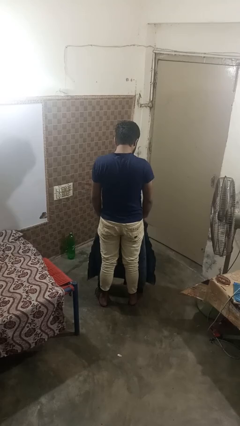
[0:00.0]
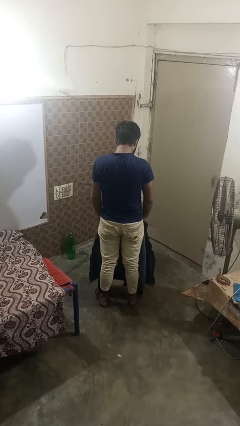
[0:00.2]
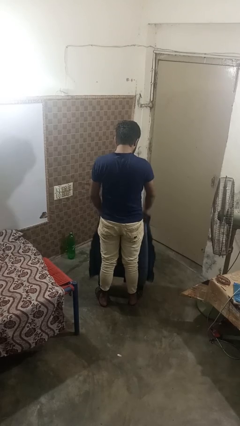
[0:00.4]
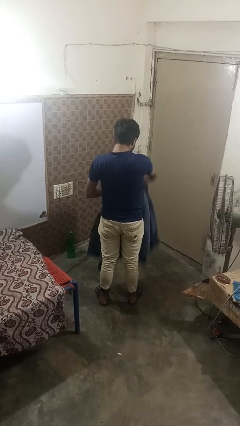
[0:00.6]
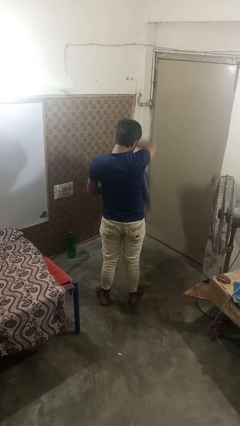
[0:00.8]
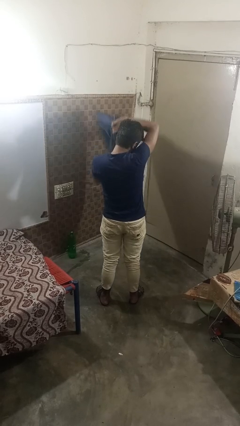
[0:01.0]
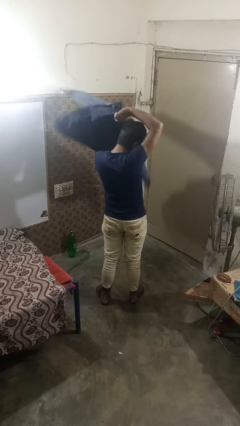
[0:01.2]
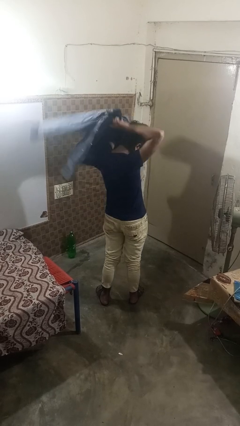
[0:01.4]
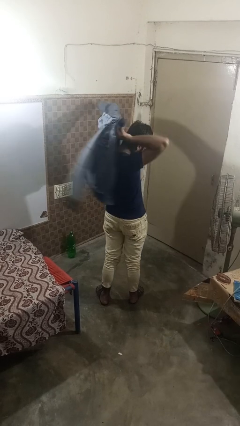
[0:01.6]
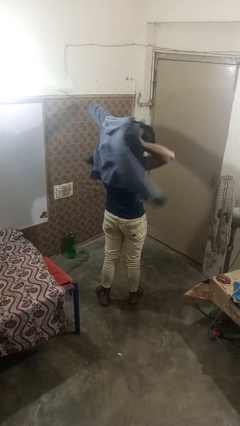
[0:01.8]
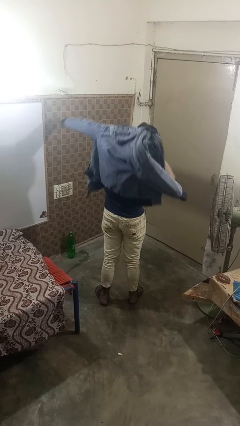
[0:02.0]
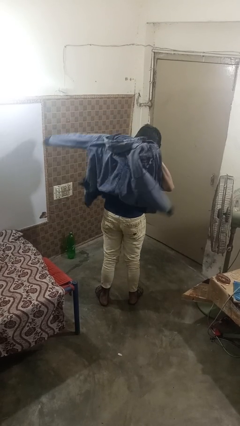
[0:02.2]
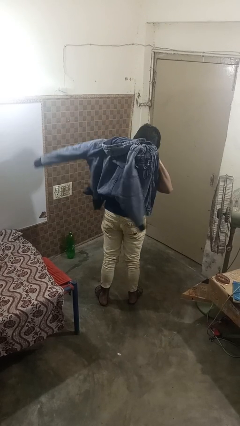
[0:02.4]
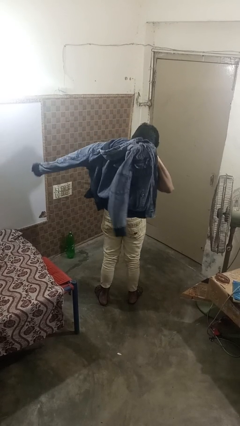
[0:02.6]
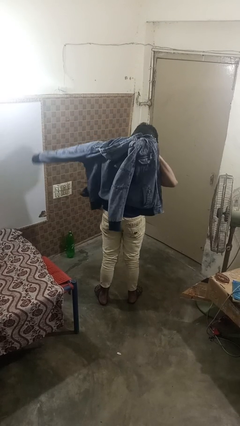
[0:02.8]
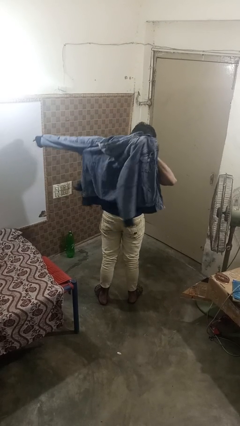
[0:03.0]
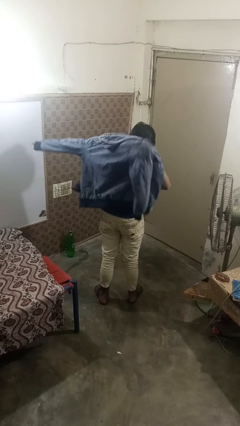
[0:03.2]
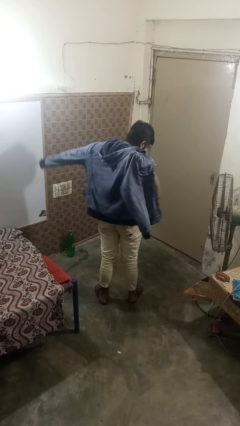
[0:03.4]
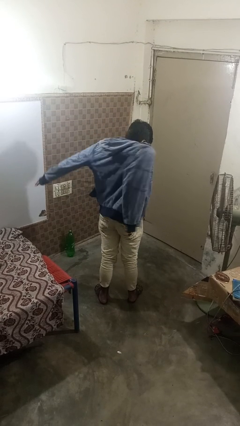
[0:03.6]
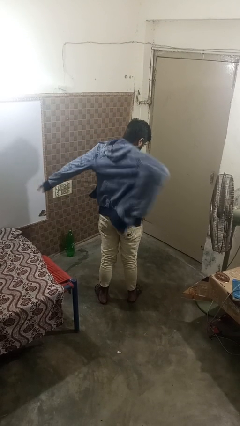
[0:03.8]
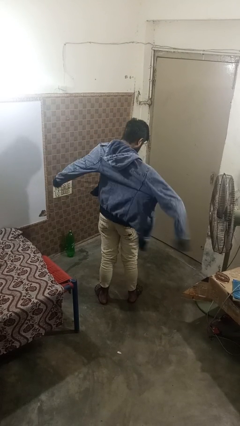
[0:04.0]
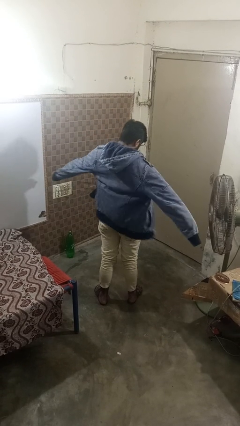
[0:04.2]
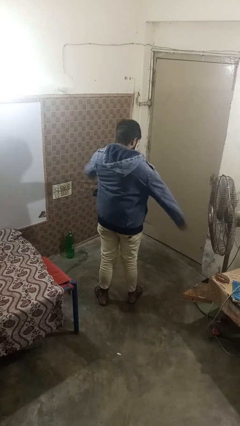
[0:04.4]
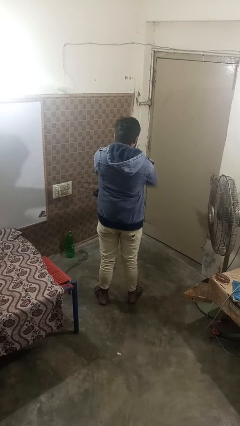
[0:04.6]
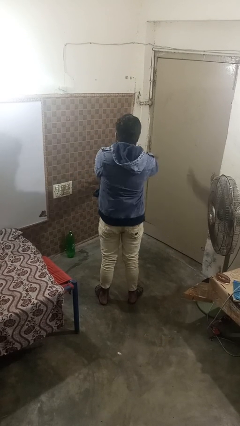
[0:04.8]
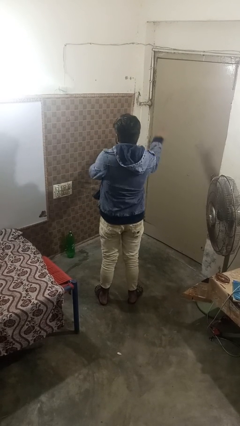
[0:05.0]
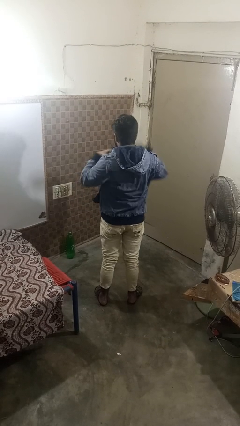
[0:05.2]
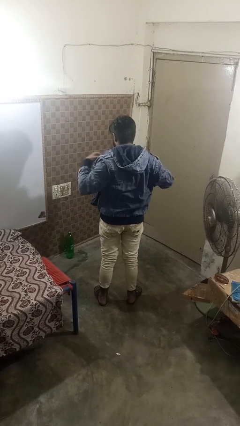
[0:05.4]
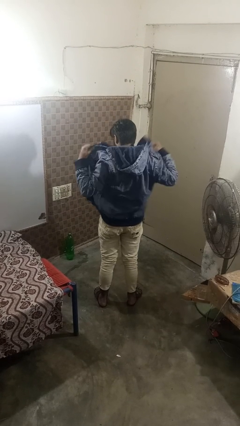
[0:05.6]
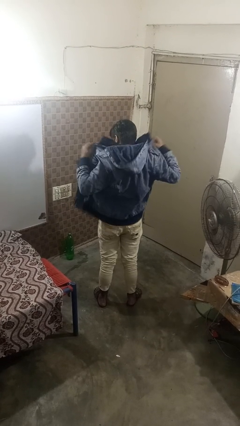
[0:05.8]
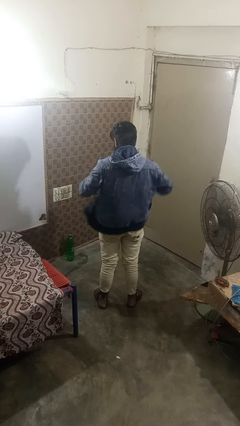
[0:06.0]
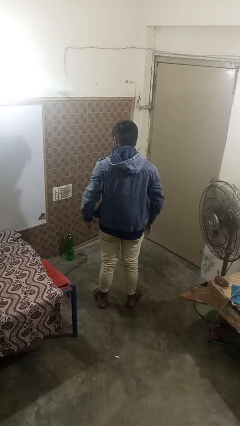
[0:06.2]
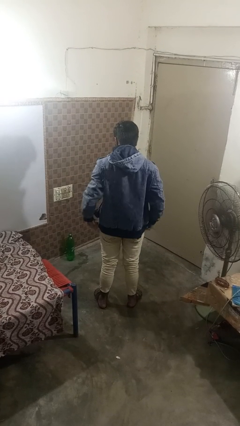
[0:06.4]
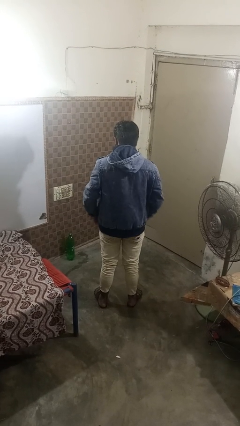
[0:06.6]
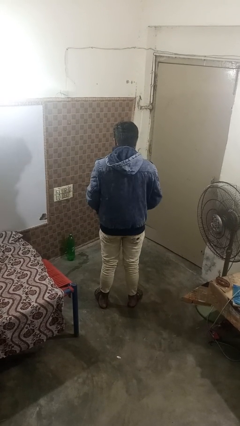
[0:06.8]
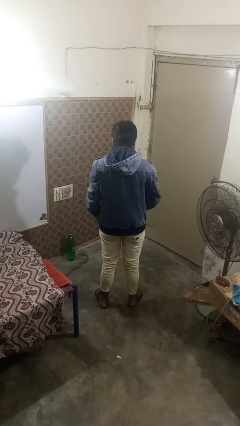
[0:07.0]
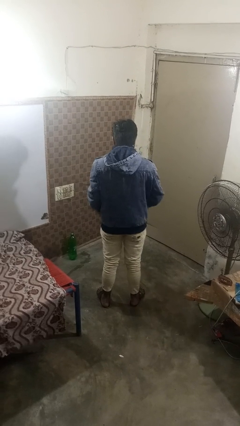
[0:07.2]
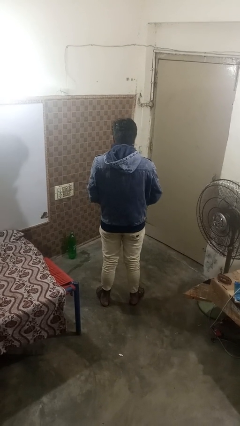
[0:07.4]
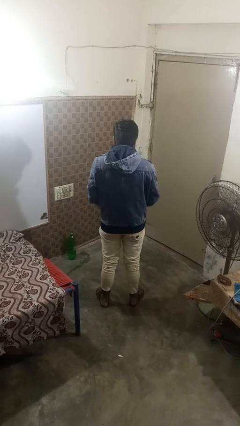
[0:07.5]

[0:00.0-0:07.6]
person puts on jacket

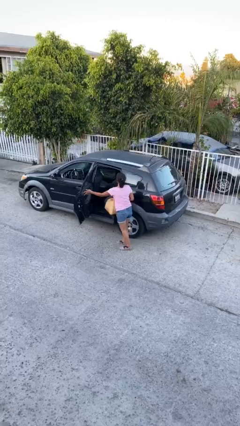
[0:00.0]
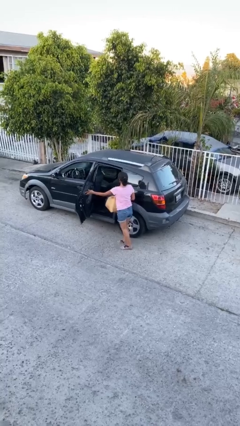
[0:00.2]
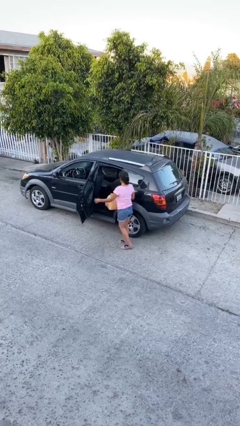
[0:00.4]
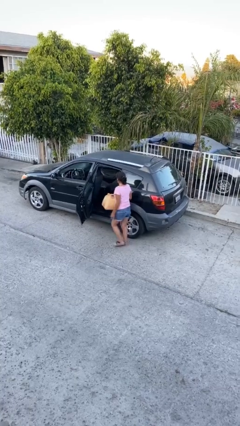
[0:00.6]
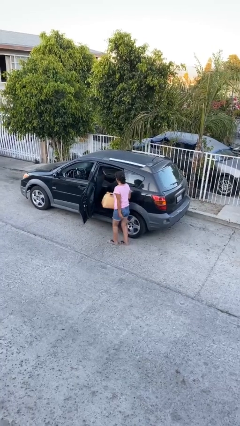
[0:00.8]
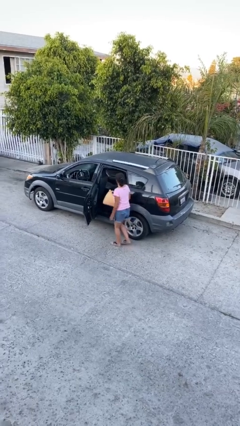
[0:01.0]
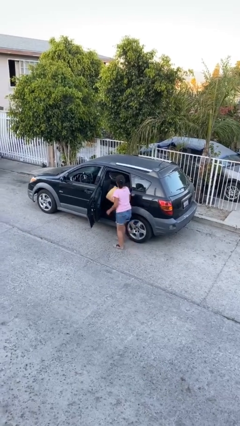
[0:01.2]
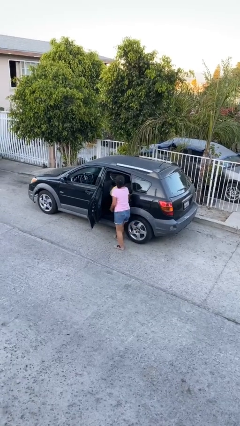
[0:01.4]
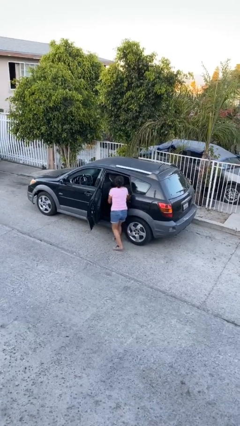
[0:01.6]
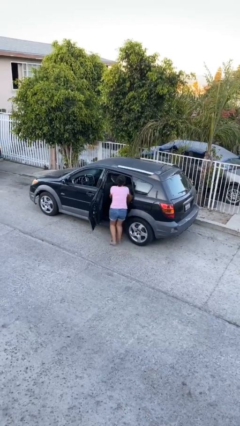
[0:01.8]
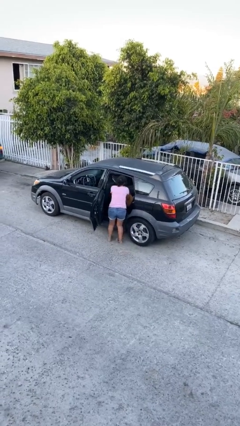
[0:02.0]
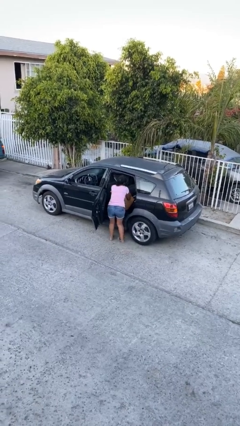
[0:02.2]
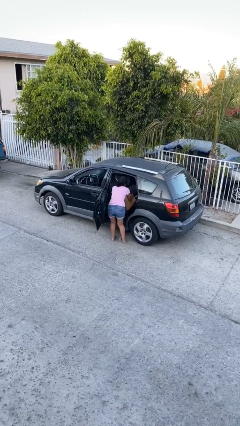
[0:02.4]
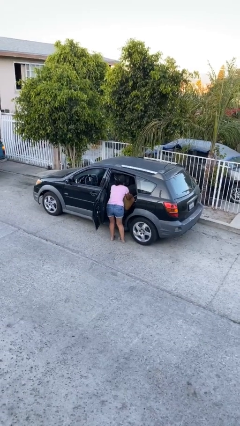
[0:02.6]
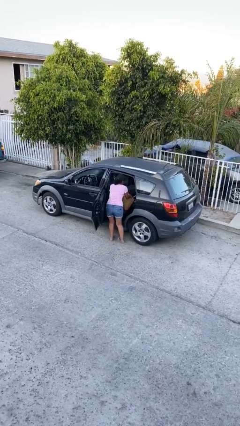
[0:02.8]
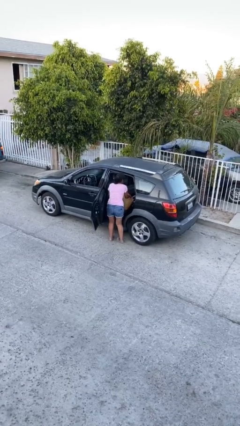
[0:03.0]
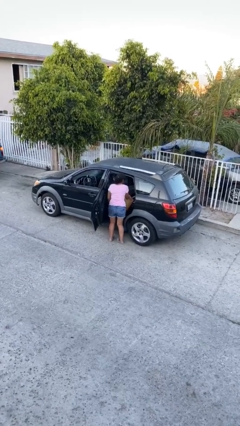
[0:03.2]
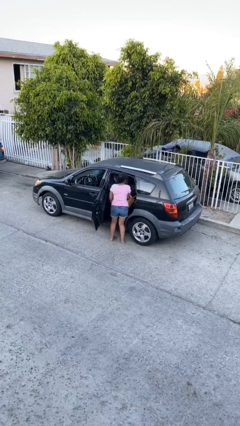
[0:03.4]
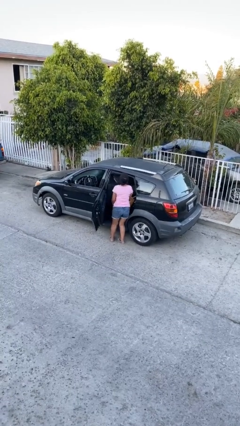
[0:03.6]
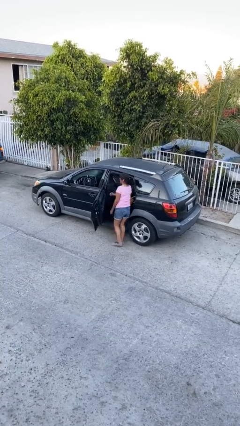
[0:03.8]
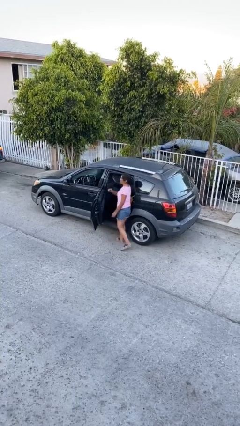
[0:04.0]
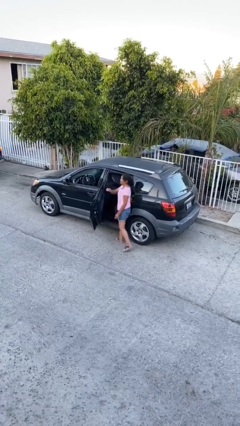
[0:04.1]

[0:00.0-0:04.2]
person loads car

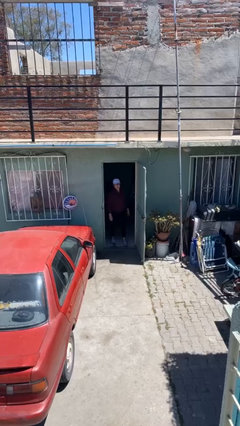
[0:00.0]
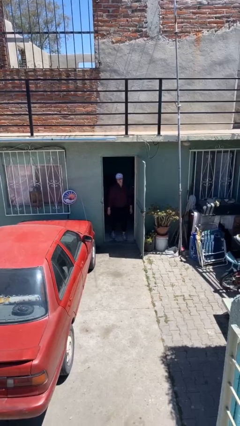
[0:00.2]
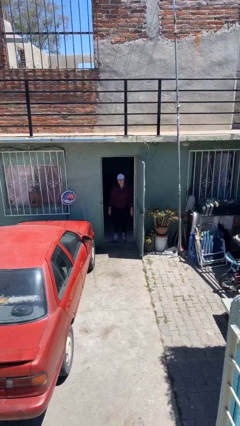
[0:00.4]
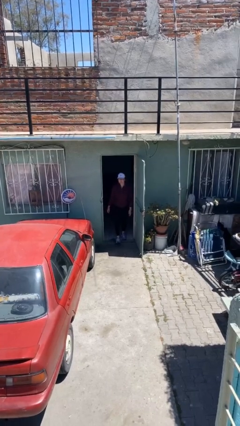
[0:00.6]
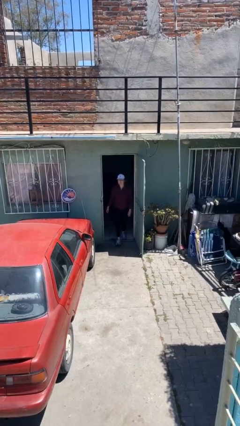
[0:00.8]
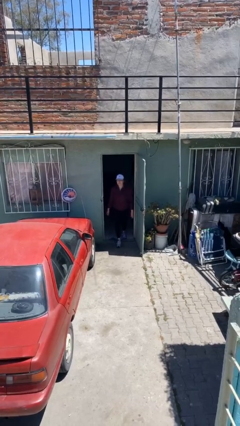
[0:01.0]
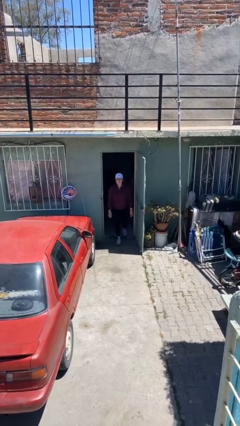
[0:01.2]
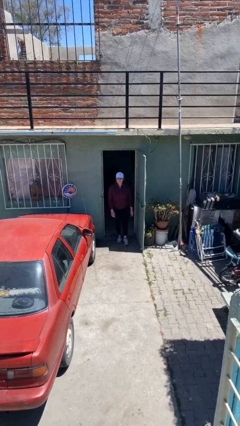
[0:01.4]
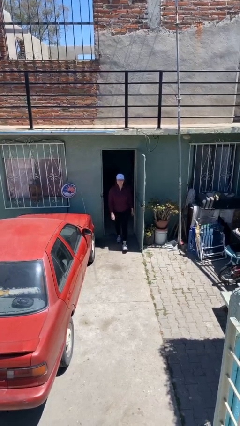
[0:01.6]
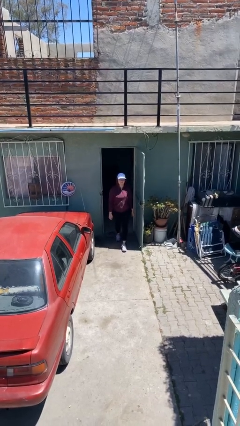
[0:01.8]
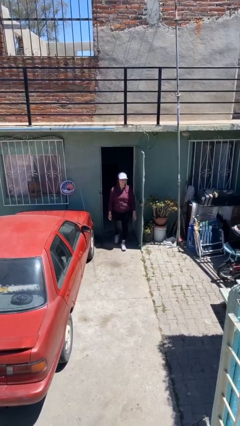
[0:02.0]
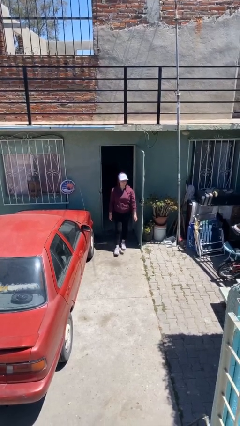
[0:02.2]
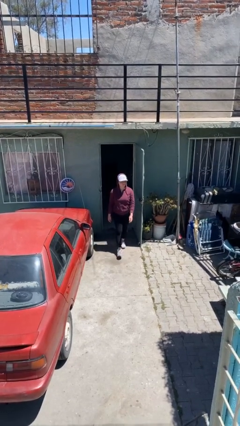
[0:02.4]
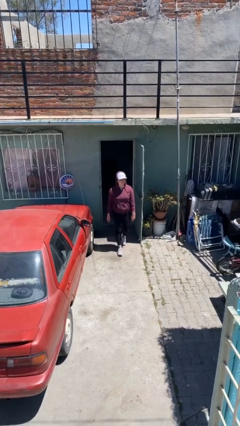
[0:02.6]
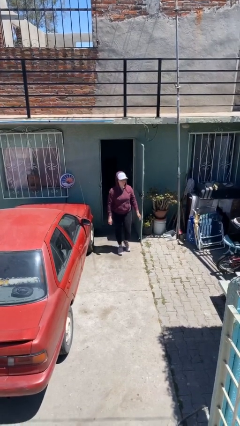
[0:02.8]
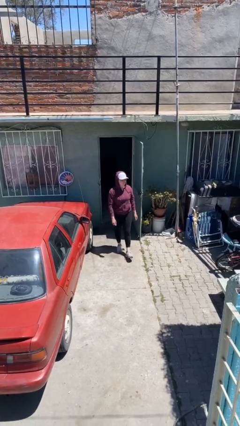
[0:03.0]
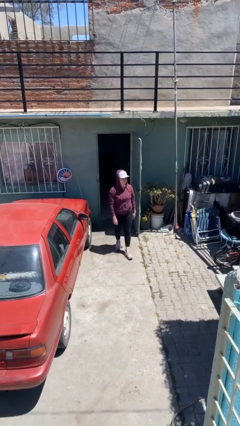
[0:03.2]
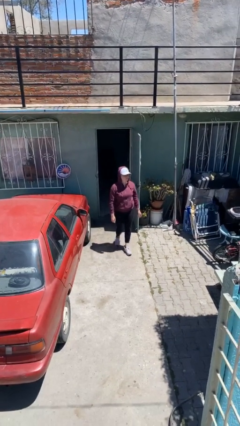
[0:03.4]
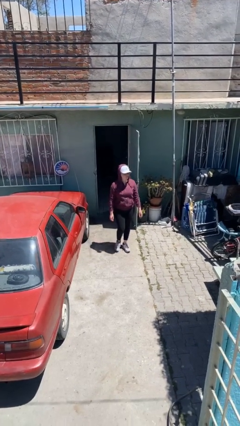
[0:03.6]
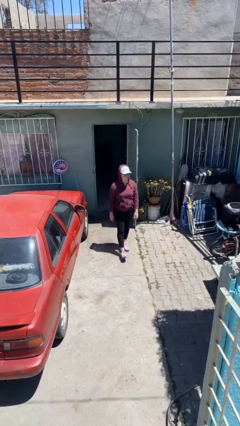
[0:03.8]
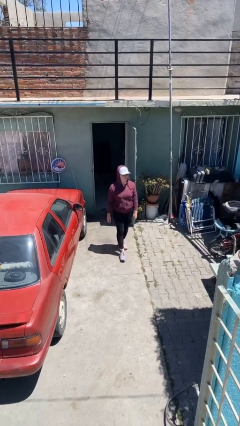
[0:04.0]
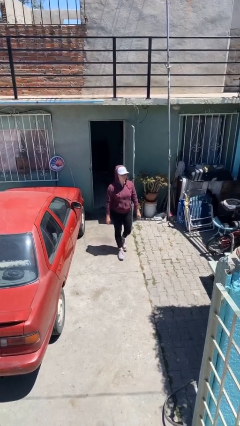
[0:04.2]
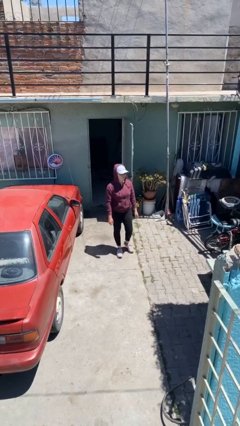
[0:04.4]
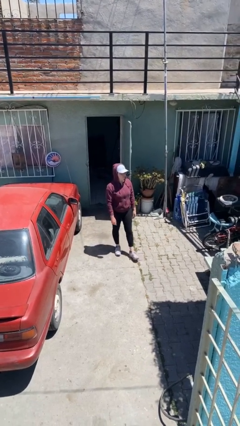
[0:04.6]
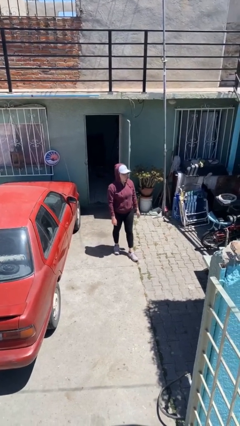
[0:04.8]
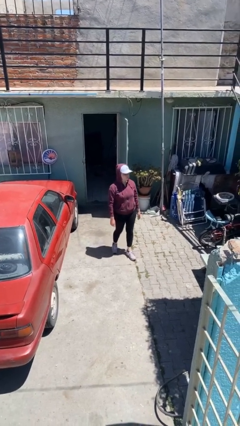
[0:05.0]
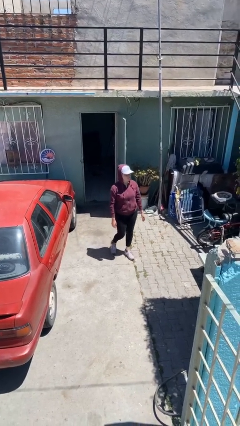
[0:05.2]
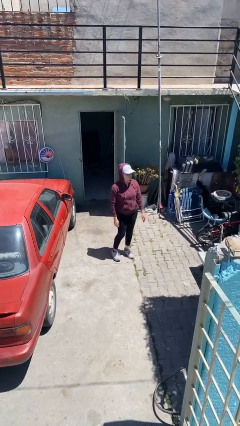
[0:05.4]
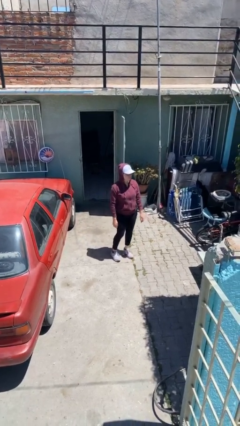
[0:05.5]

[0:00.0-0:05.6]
person enters scene through structure

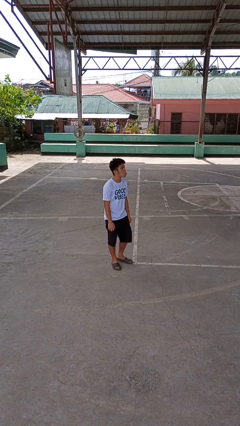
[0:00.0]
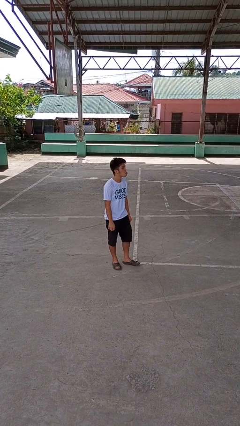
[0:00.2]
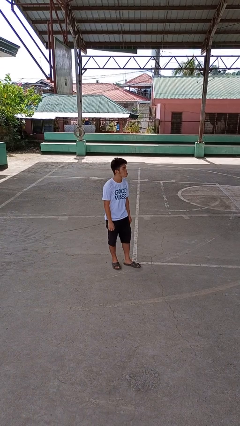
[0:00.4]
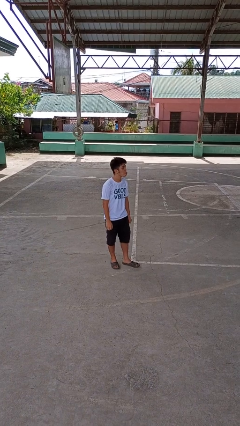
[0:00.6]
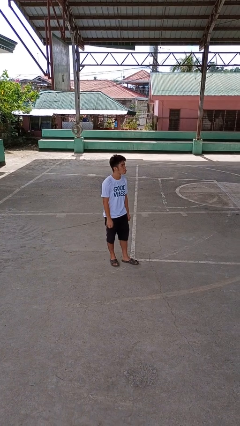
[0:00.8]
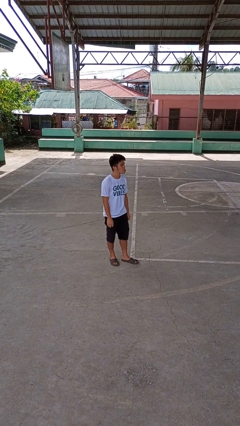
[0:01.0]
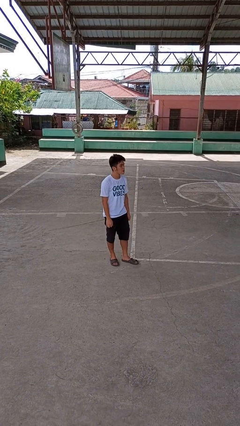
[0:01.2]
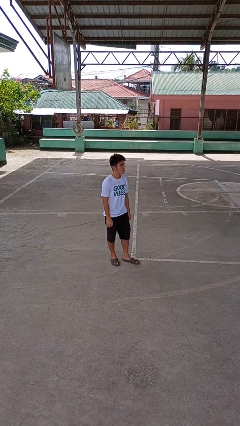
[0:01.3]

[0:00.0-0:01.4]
person sticks out tongue
